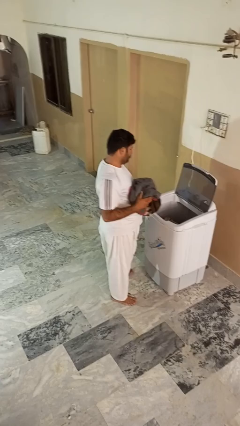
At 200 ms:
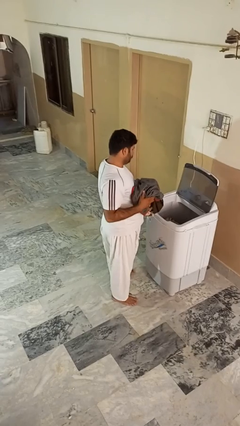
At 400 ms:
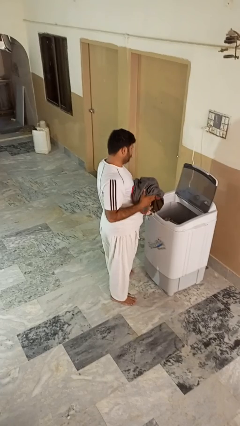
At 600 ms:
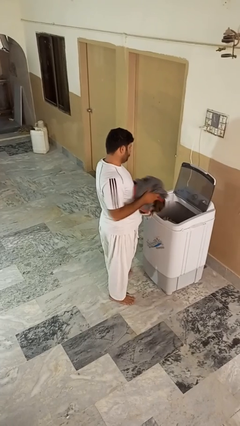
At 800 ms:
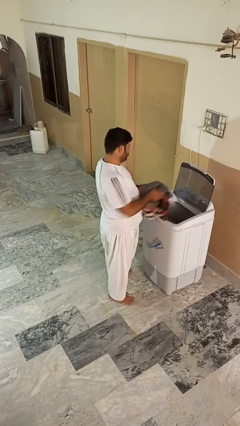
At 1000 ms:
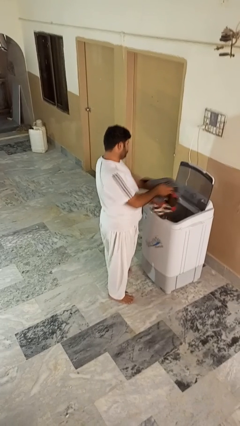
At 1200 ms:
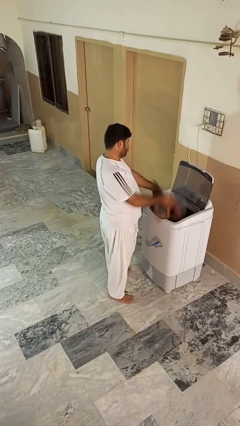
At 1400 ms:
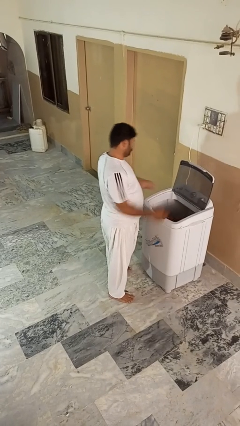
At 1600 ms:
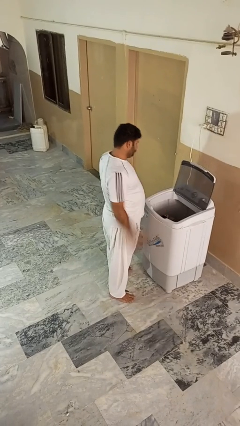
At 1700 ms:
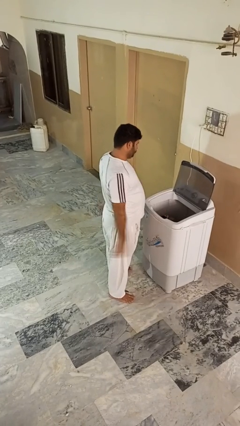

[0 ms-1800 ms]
person loads clotheswasher

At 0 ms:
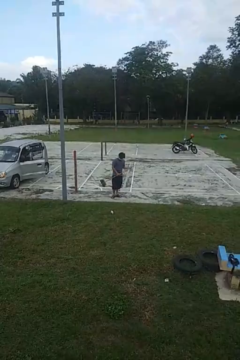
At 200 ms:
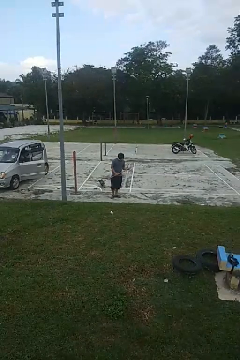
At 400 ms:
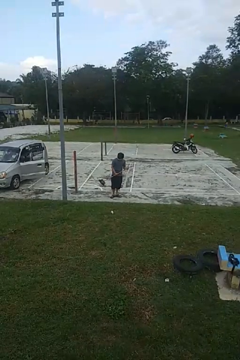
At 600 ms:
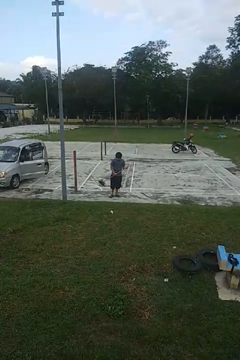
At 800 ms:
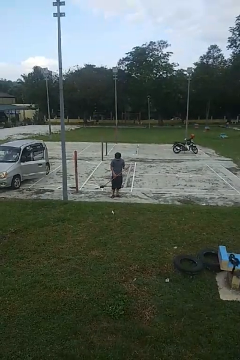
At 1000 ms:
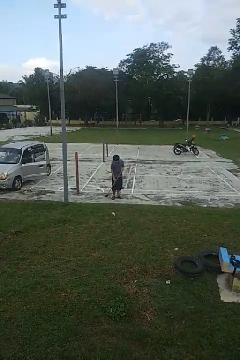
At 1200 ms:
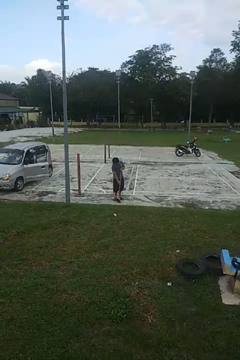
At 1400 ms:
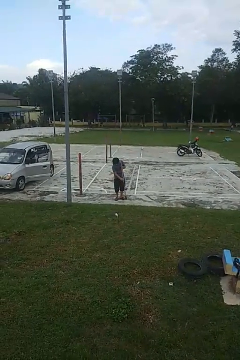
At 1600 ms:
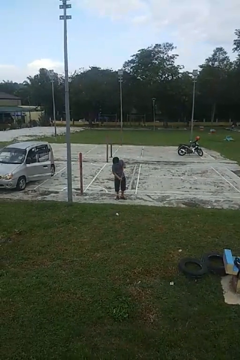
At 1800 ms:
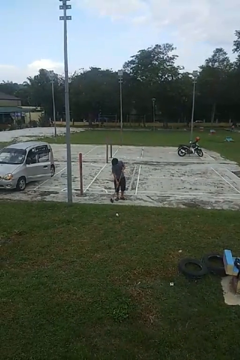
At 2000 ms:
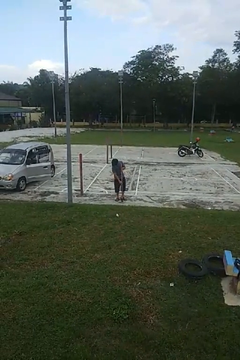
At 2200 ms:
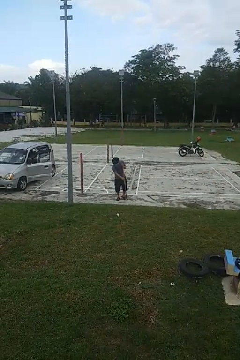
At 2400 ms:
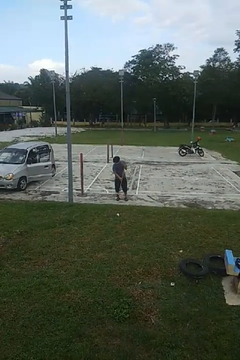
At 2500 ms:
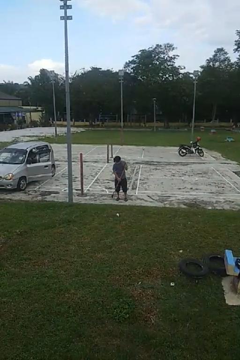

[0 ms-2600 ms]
person sweeps floor

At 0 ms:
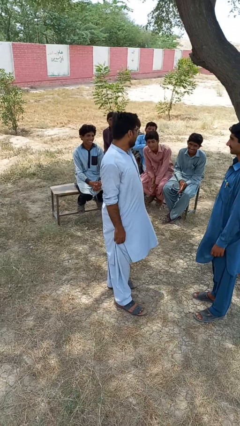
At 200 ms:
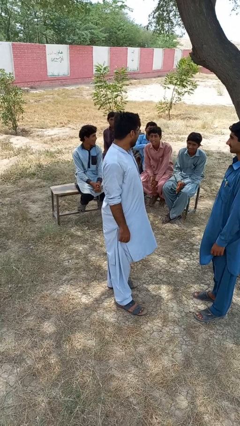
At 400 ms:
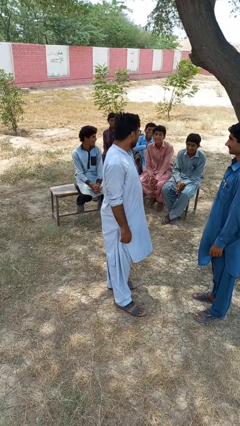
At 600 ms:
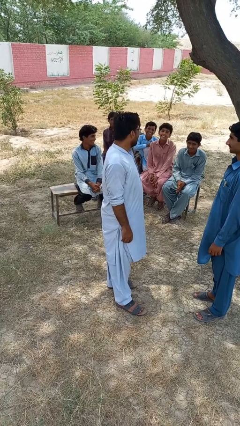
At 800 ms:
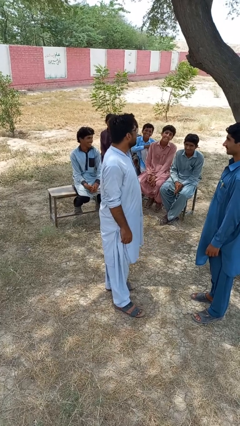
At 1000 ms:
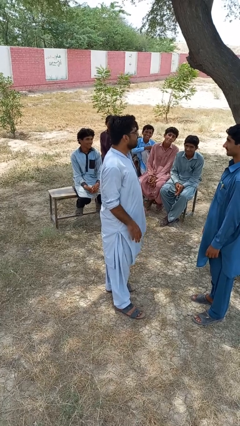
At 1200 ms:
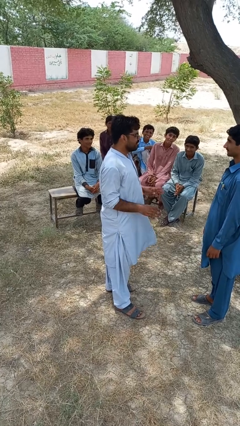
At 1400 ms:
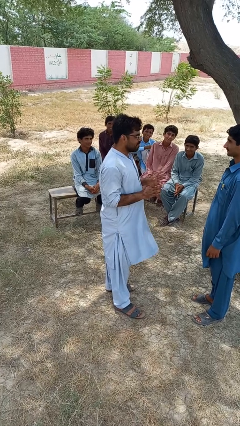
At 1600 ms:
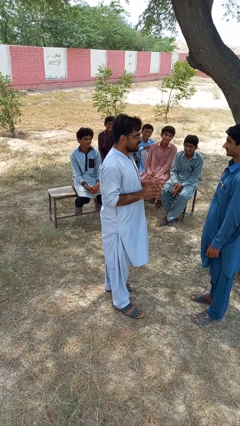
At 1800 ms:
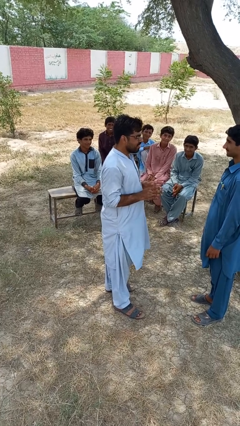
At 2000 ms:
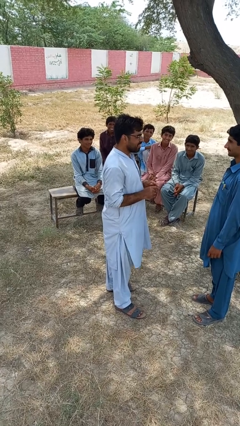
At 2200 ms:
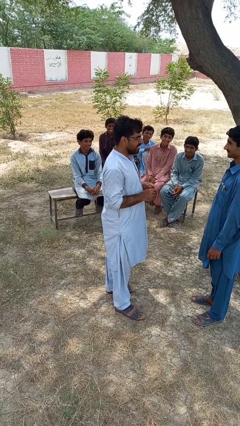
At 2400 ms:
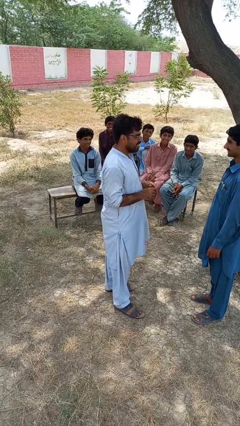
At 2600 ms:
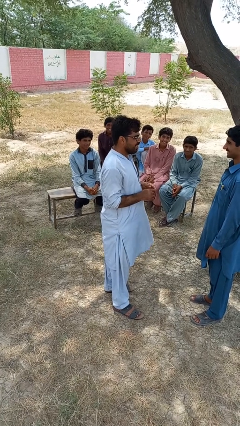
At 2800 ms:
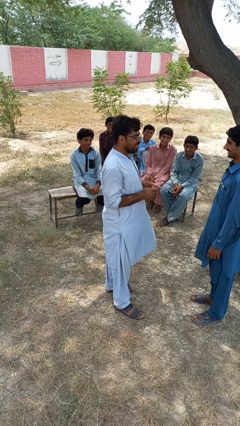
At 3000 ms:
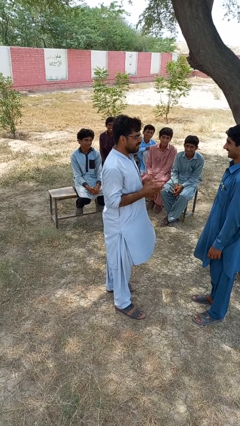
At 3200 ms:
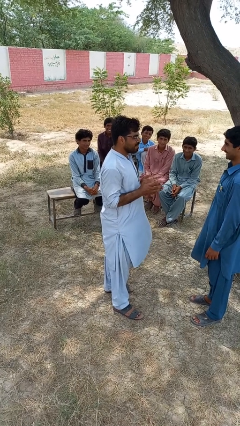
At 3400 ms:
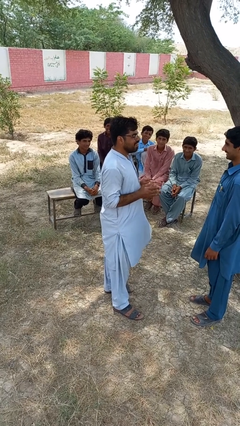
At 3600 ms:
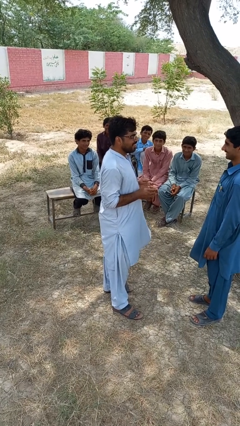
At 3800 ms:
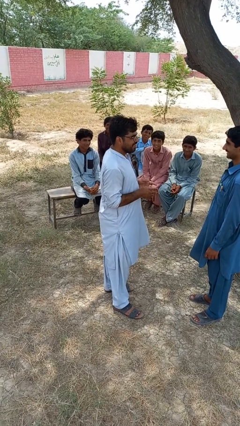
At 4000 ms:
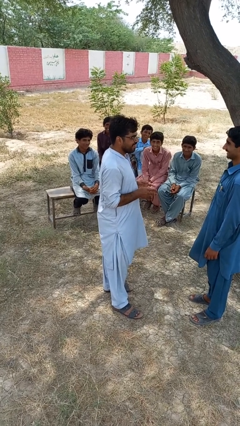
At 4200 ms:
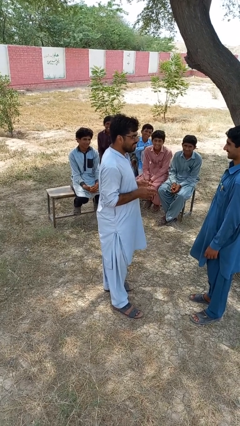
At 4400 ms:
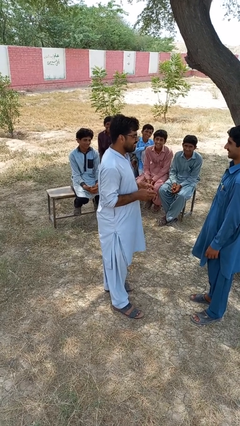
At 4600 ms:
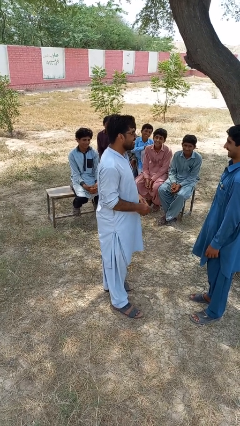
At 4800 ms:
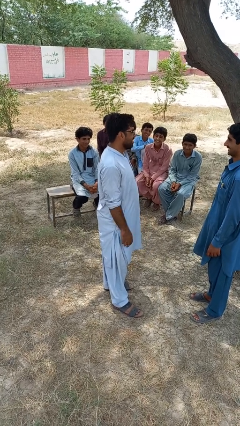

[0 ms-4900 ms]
person talks to person

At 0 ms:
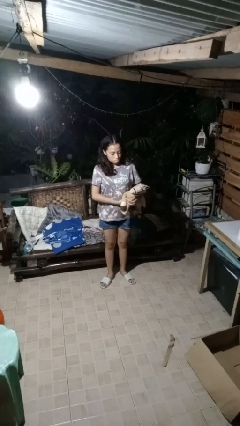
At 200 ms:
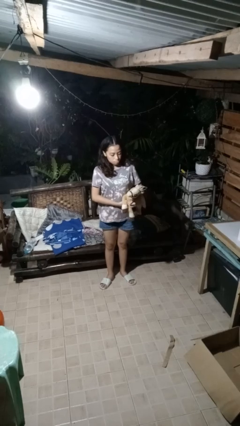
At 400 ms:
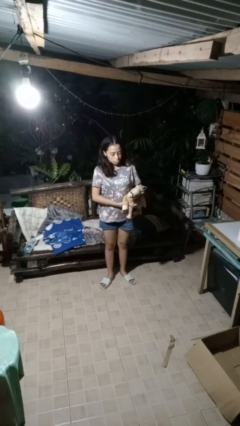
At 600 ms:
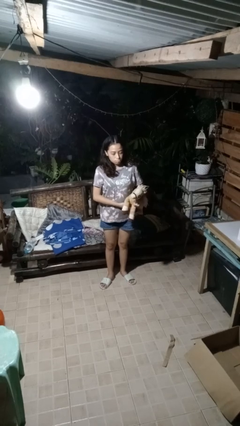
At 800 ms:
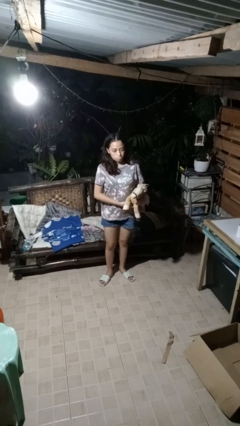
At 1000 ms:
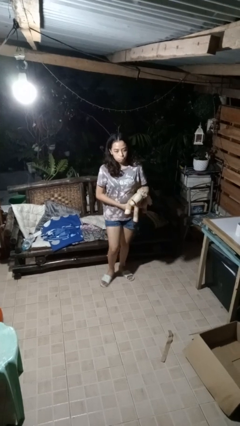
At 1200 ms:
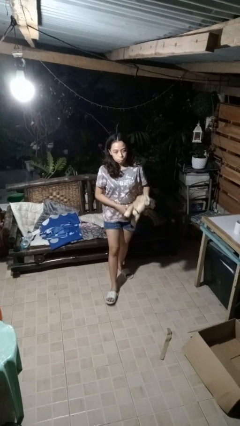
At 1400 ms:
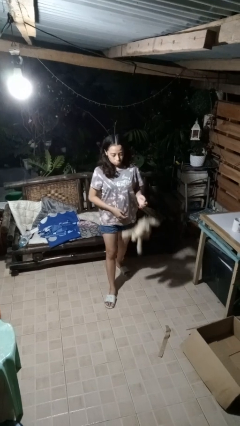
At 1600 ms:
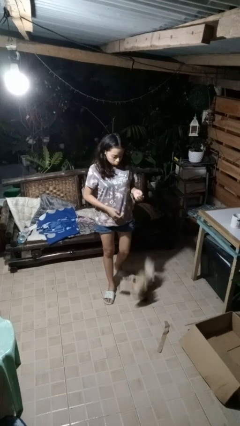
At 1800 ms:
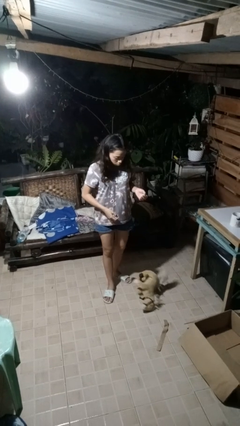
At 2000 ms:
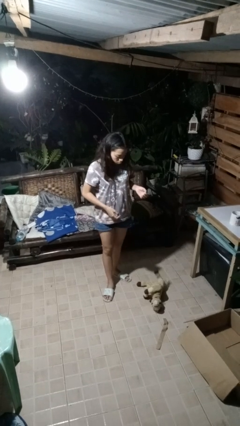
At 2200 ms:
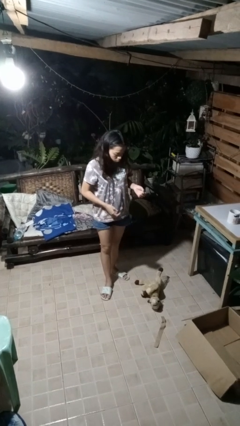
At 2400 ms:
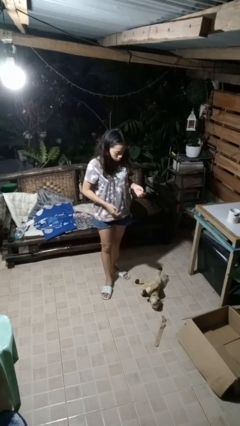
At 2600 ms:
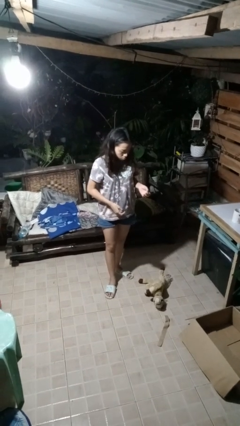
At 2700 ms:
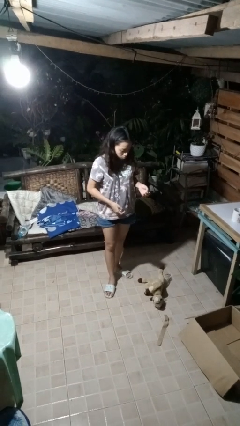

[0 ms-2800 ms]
person drops object

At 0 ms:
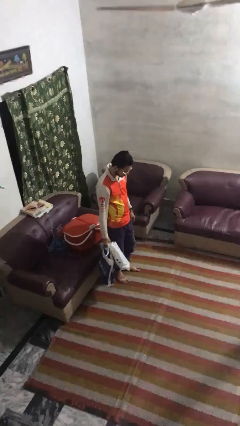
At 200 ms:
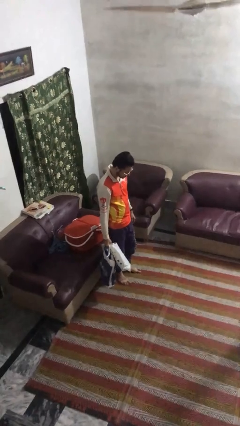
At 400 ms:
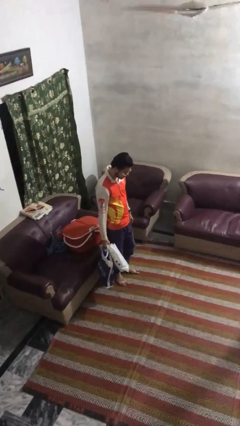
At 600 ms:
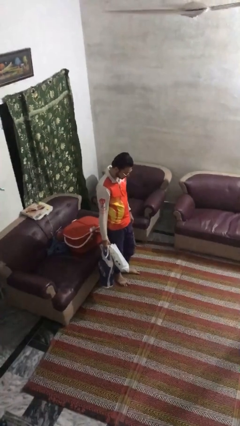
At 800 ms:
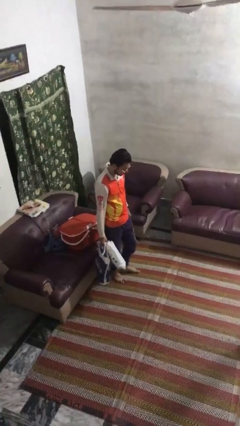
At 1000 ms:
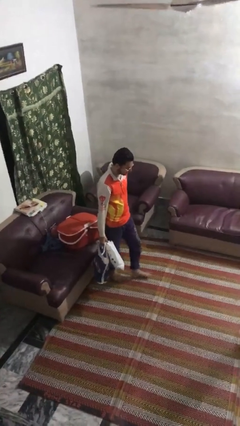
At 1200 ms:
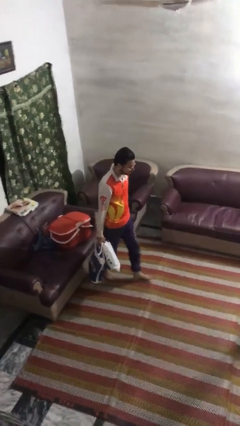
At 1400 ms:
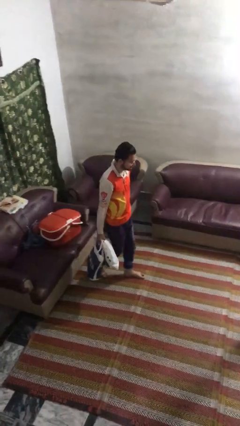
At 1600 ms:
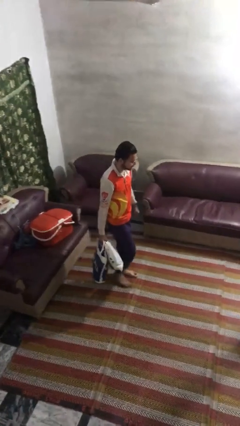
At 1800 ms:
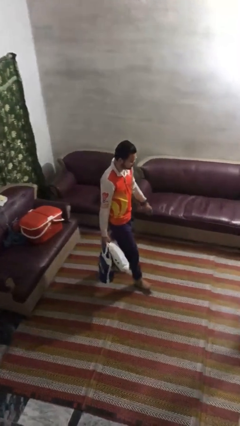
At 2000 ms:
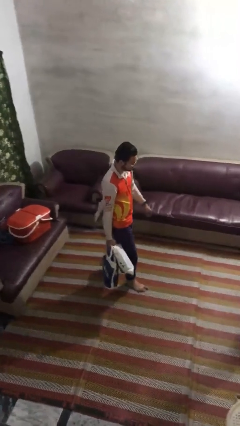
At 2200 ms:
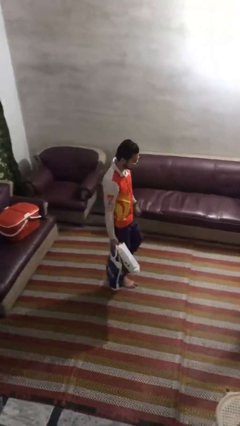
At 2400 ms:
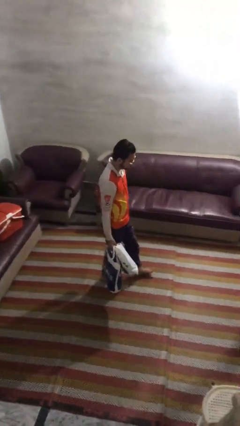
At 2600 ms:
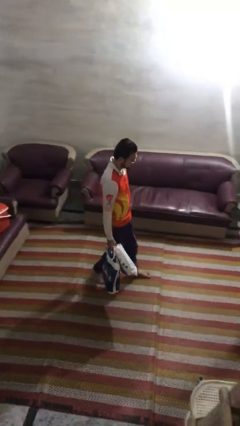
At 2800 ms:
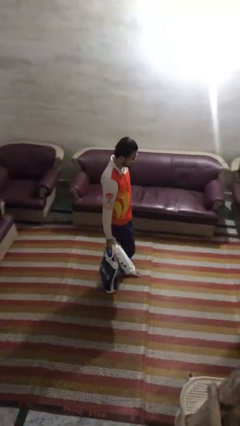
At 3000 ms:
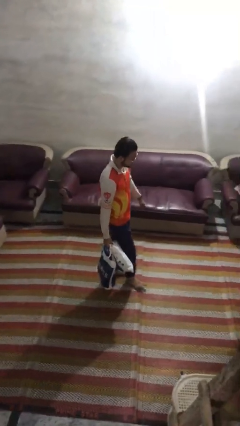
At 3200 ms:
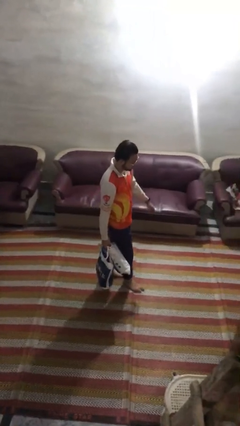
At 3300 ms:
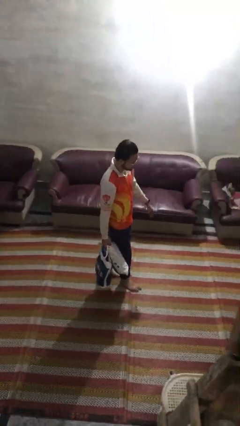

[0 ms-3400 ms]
person carries groceries

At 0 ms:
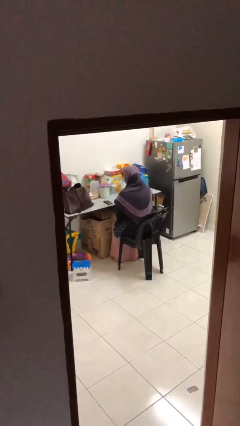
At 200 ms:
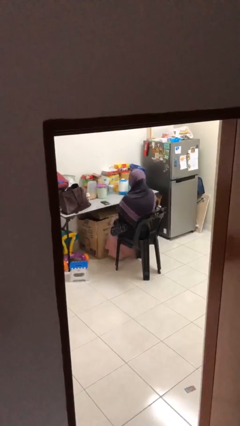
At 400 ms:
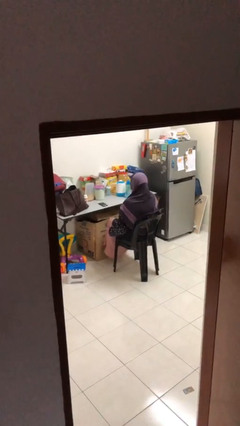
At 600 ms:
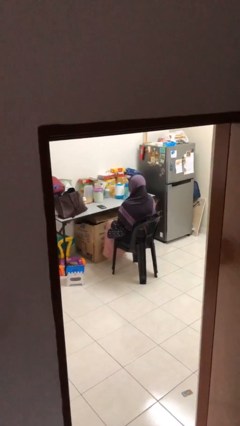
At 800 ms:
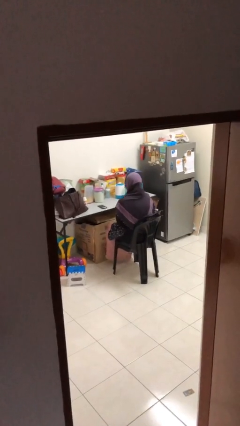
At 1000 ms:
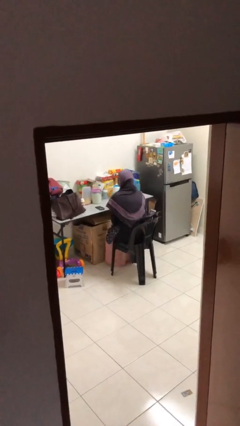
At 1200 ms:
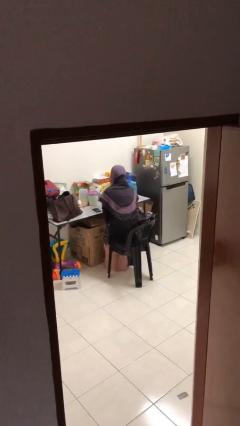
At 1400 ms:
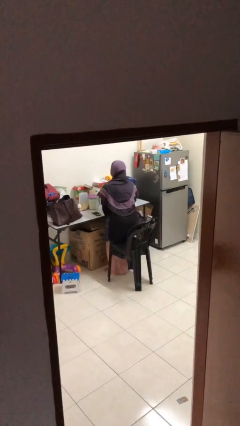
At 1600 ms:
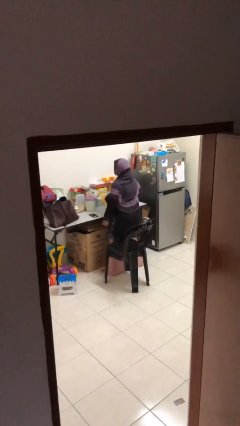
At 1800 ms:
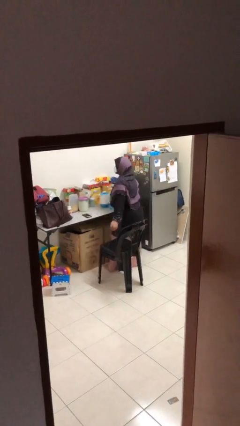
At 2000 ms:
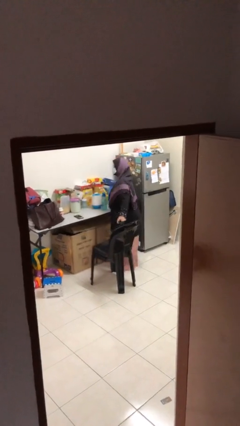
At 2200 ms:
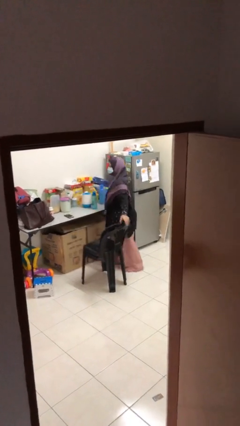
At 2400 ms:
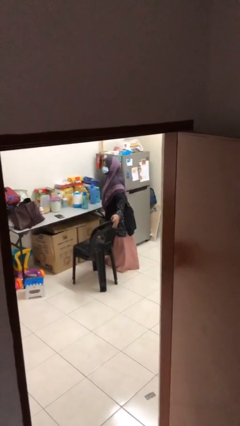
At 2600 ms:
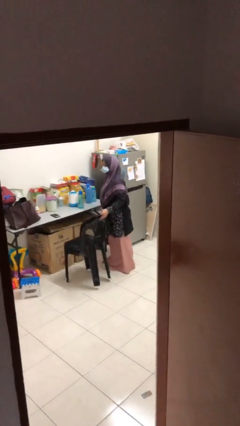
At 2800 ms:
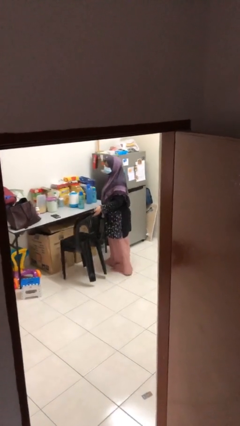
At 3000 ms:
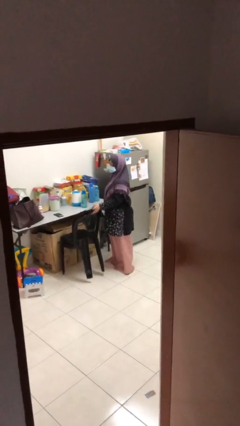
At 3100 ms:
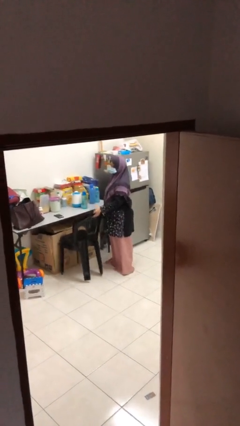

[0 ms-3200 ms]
person stands up
